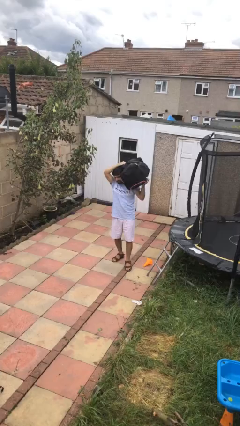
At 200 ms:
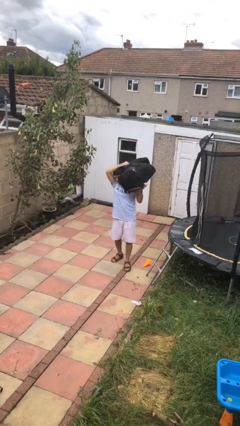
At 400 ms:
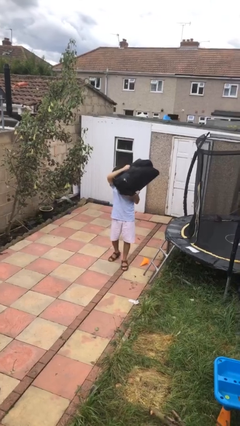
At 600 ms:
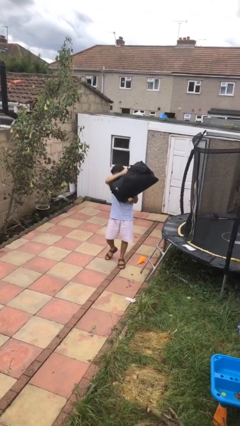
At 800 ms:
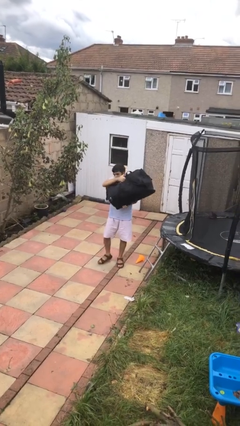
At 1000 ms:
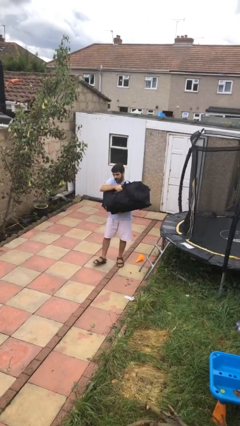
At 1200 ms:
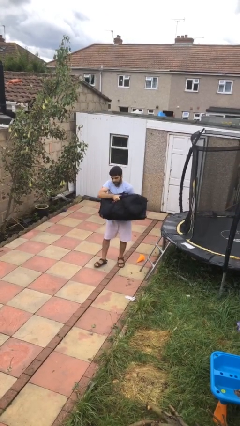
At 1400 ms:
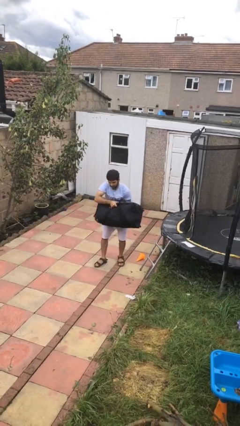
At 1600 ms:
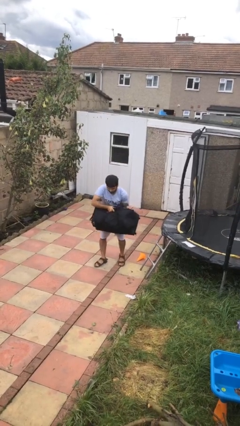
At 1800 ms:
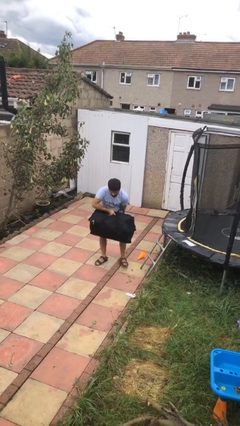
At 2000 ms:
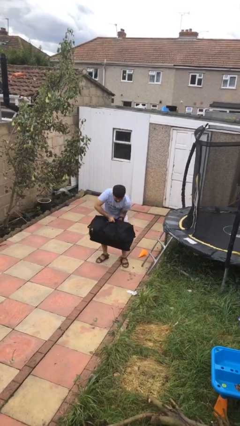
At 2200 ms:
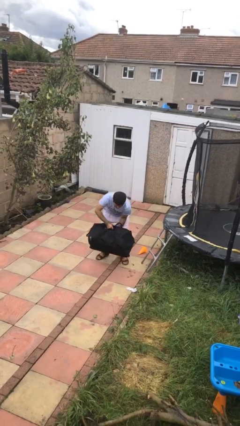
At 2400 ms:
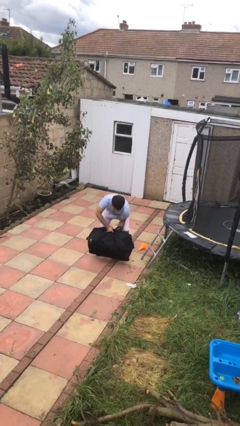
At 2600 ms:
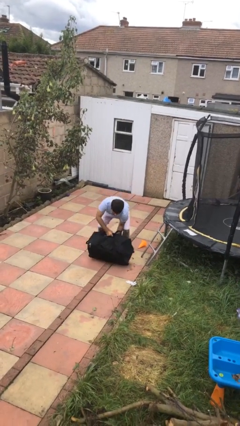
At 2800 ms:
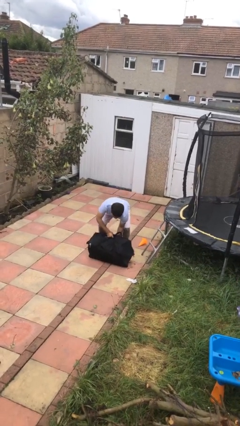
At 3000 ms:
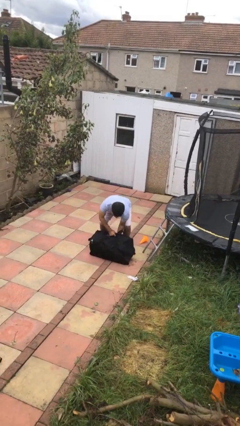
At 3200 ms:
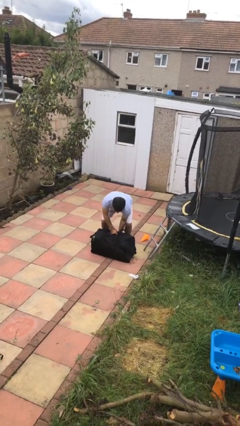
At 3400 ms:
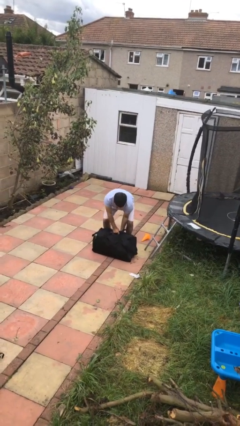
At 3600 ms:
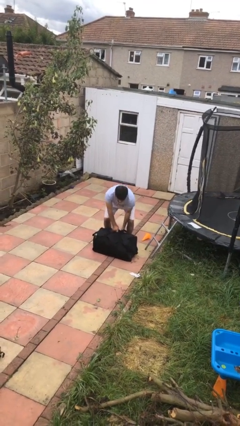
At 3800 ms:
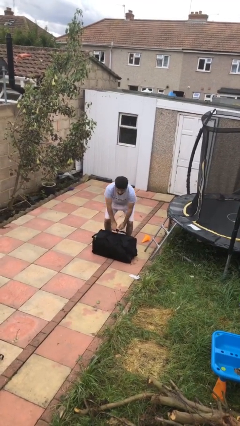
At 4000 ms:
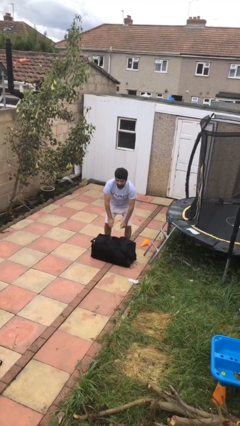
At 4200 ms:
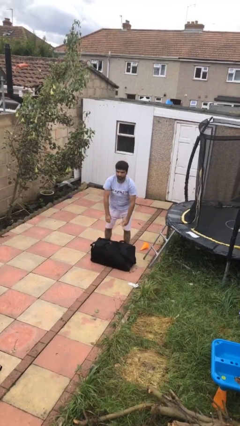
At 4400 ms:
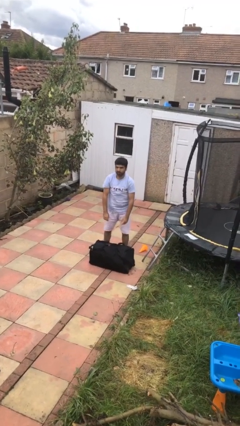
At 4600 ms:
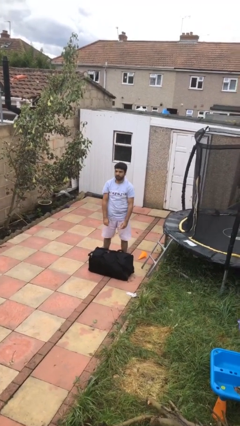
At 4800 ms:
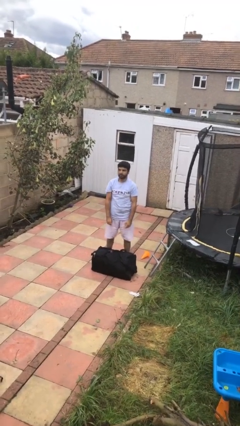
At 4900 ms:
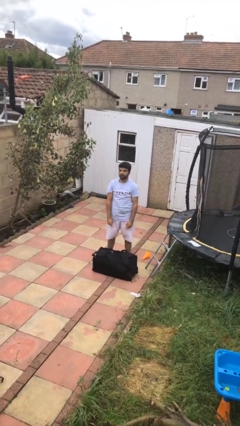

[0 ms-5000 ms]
person puts down object on floor

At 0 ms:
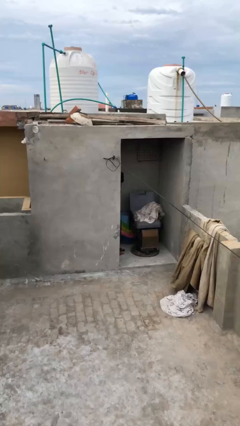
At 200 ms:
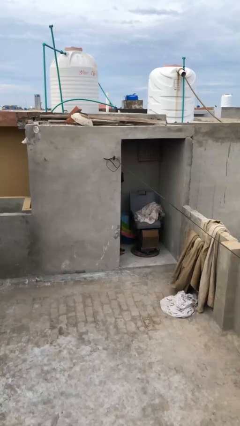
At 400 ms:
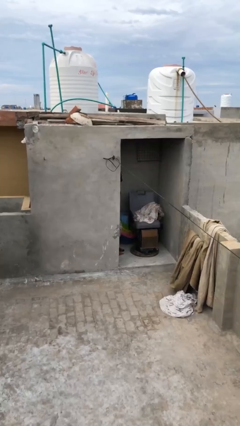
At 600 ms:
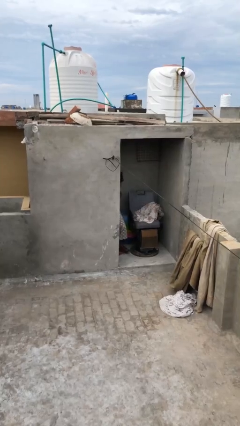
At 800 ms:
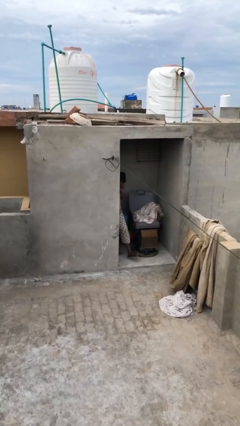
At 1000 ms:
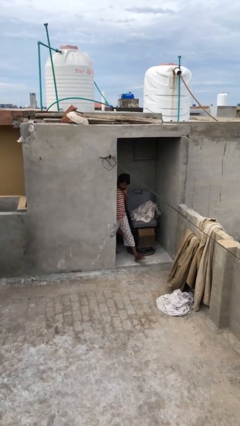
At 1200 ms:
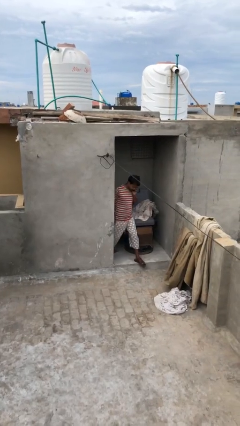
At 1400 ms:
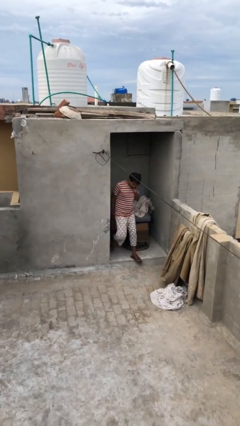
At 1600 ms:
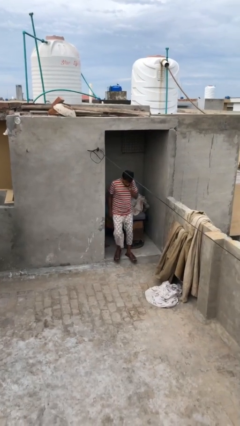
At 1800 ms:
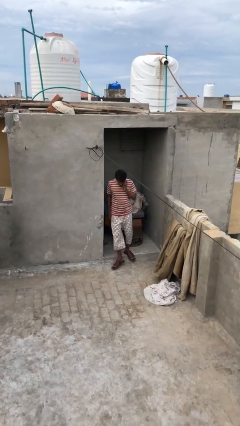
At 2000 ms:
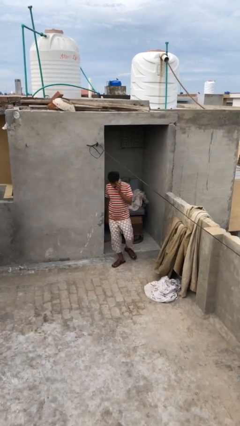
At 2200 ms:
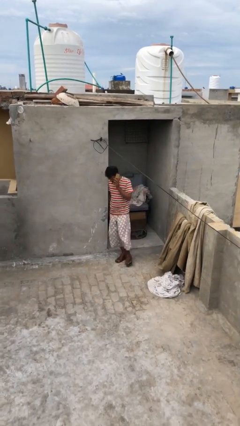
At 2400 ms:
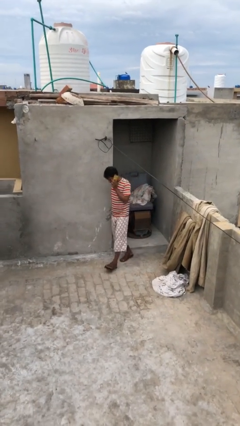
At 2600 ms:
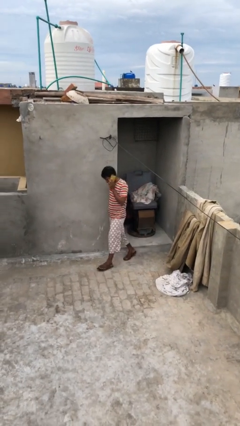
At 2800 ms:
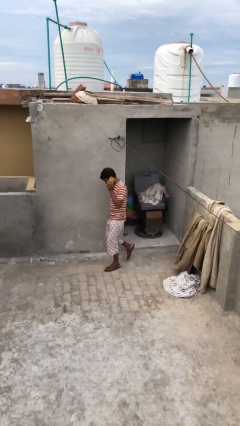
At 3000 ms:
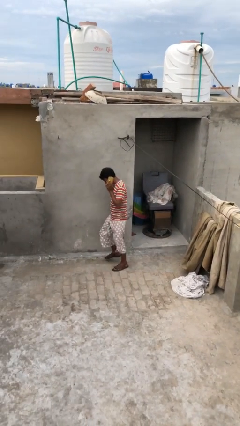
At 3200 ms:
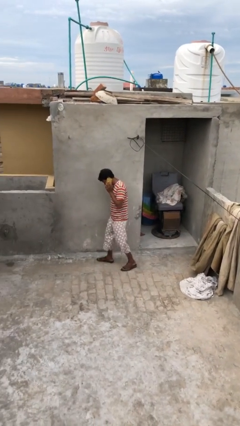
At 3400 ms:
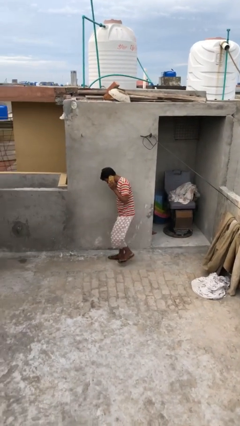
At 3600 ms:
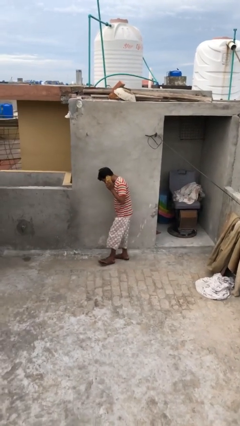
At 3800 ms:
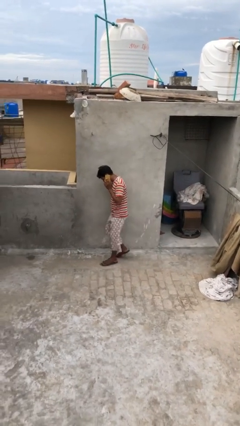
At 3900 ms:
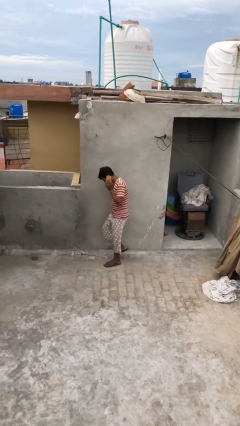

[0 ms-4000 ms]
person enters scene through structure

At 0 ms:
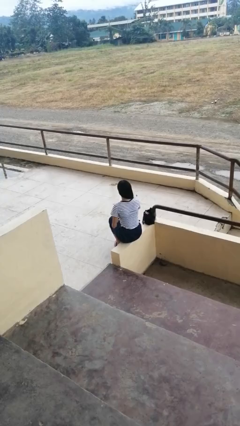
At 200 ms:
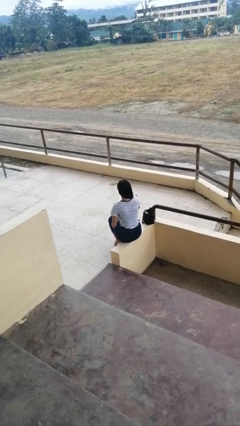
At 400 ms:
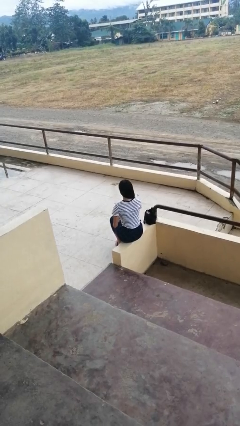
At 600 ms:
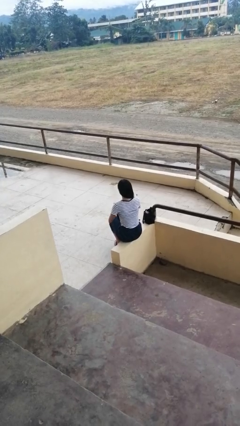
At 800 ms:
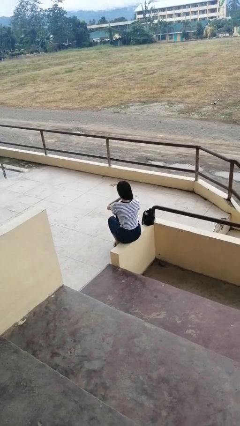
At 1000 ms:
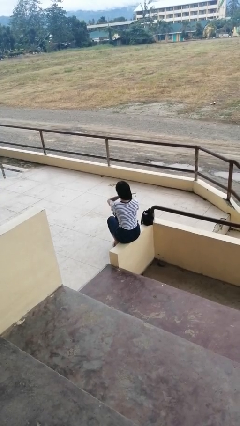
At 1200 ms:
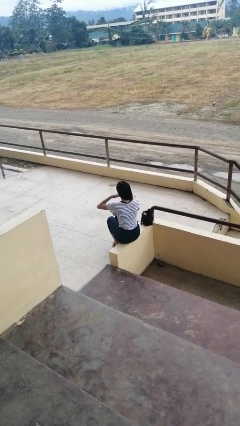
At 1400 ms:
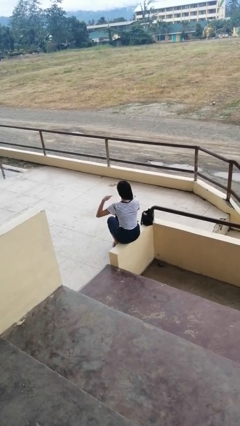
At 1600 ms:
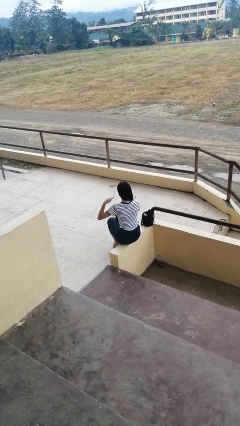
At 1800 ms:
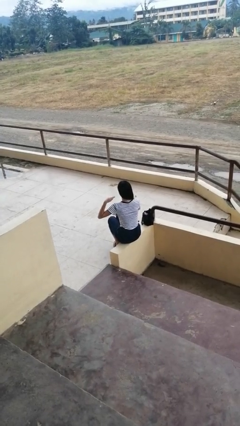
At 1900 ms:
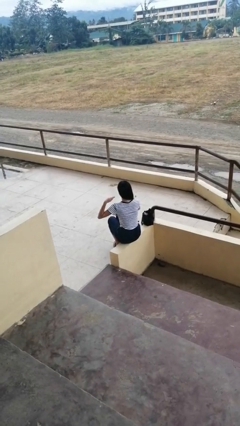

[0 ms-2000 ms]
person gestures cut

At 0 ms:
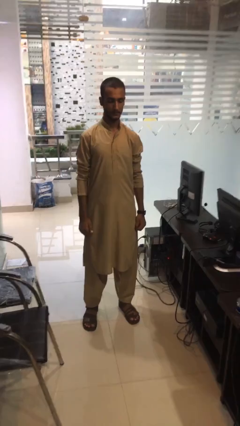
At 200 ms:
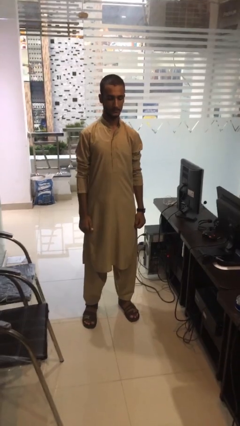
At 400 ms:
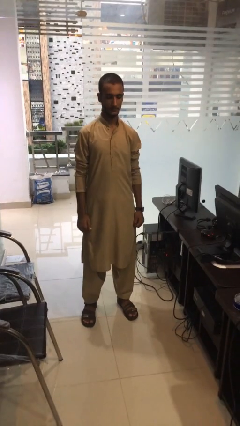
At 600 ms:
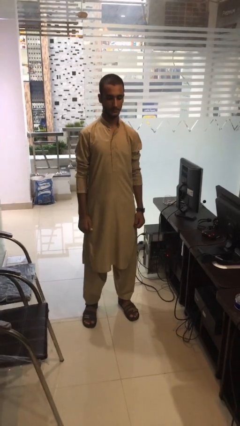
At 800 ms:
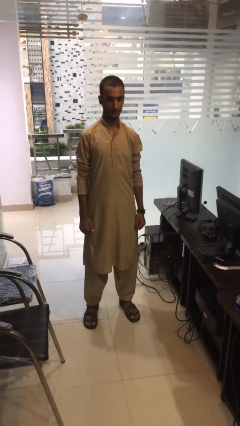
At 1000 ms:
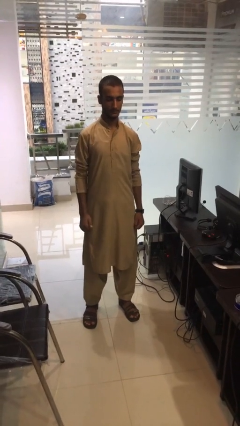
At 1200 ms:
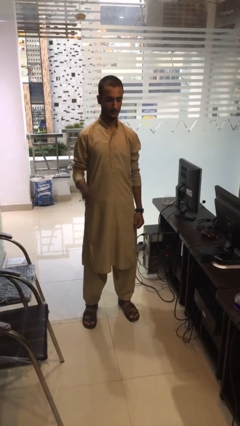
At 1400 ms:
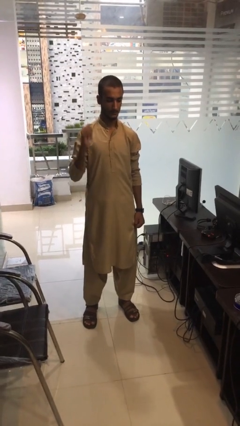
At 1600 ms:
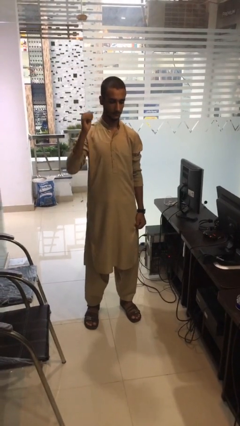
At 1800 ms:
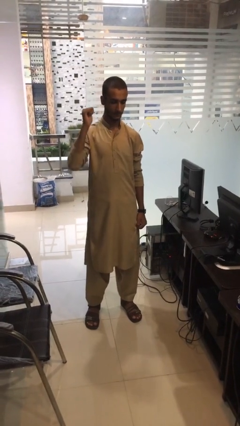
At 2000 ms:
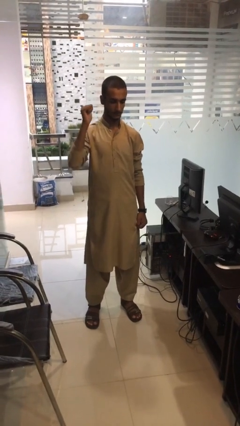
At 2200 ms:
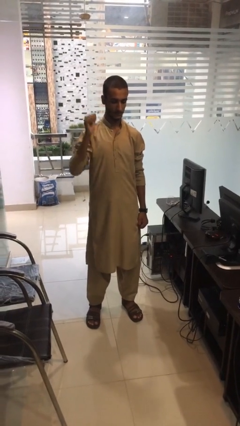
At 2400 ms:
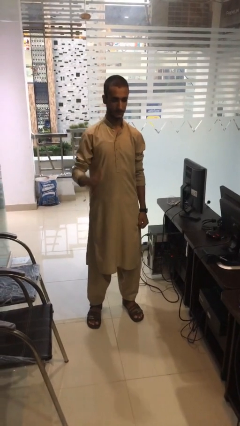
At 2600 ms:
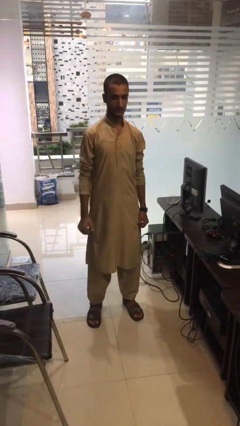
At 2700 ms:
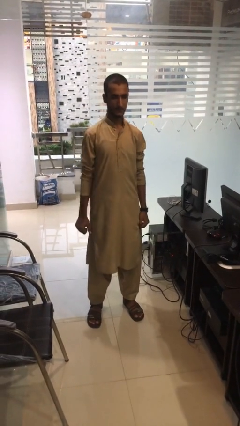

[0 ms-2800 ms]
person gestures behind me

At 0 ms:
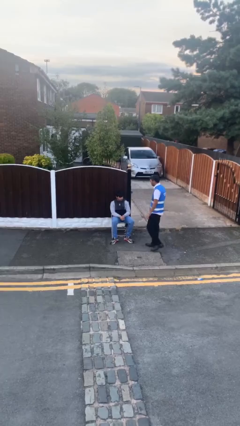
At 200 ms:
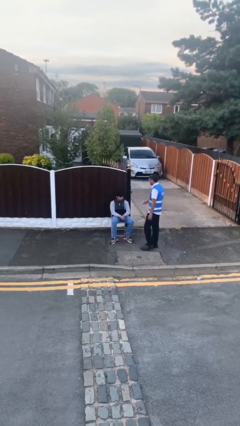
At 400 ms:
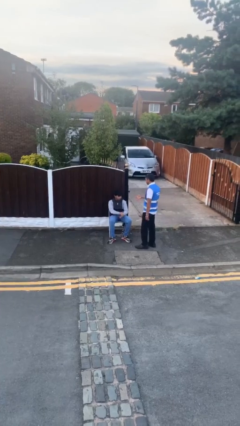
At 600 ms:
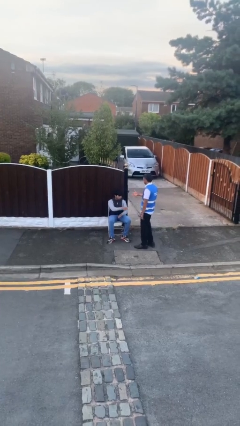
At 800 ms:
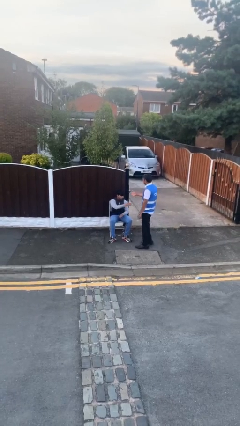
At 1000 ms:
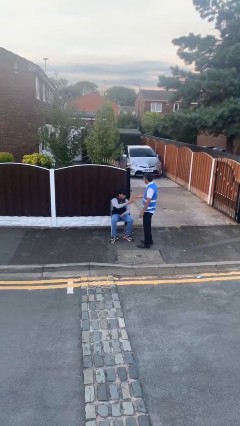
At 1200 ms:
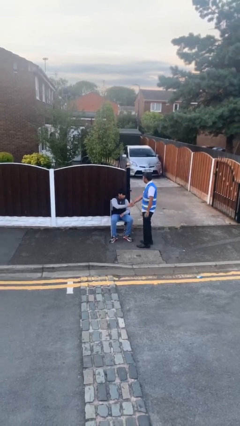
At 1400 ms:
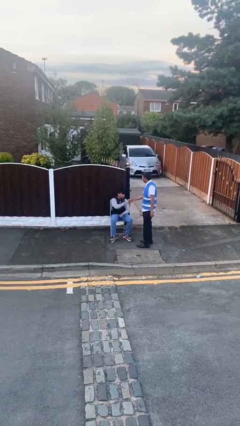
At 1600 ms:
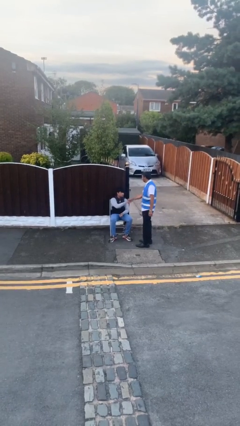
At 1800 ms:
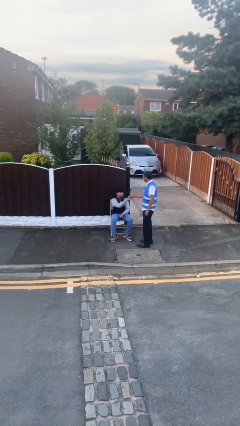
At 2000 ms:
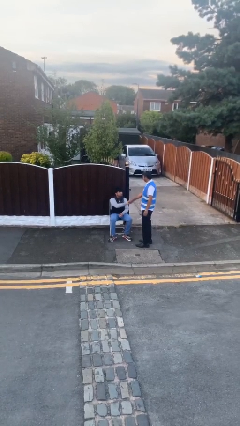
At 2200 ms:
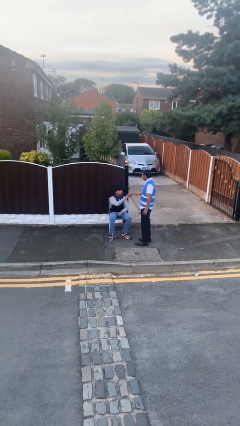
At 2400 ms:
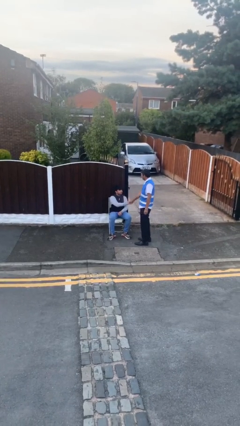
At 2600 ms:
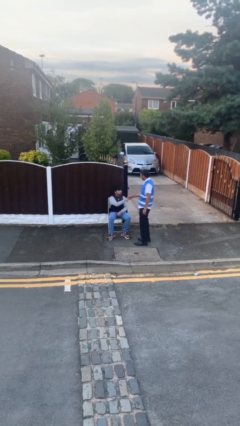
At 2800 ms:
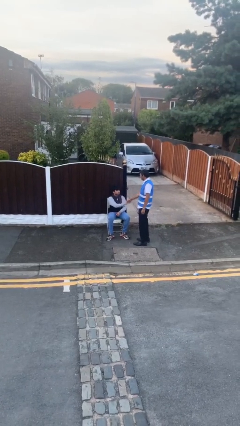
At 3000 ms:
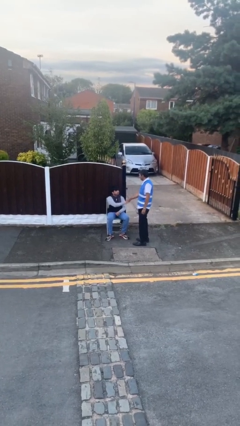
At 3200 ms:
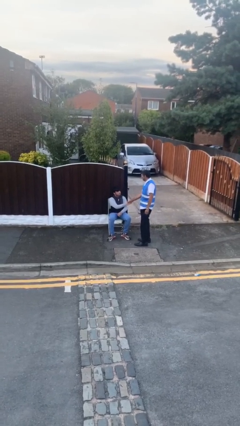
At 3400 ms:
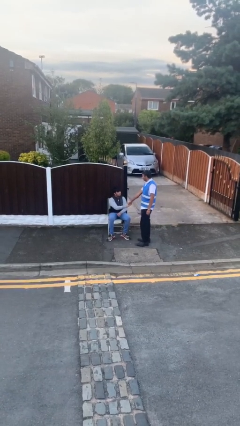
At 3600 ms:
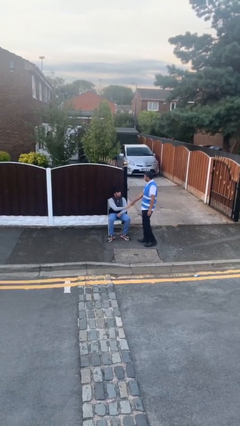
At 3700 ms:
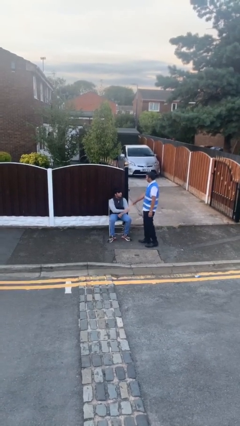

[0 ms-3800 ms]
person shakes hand
